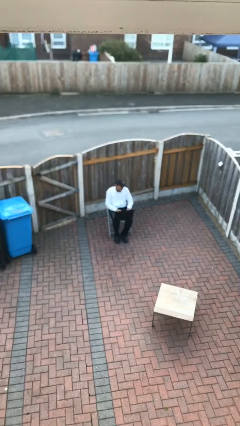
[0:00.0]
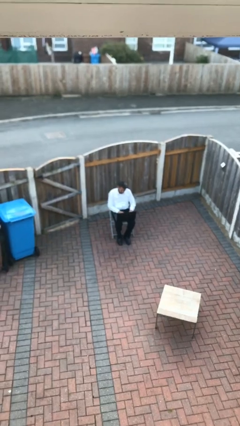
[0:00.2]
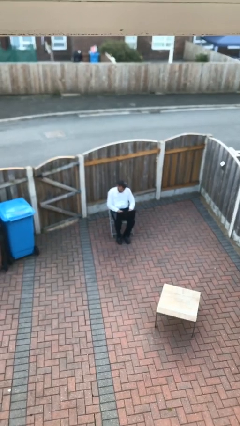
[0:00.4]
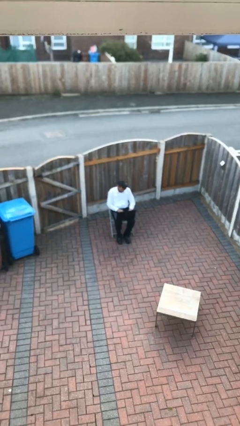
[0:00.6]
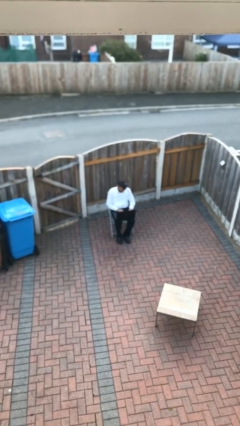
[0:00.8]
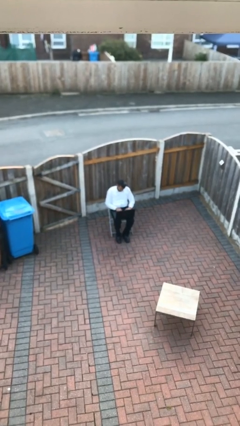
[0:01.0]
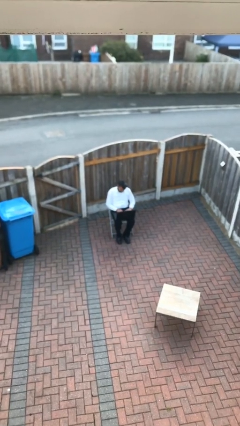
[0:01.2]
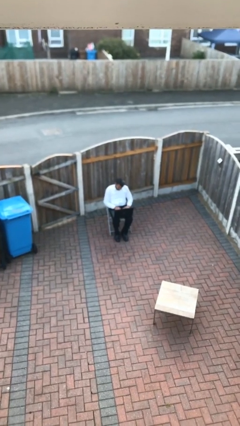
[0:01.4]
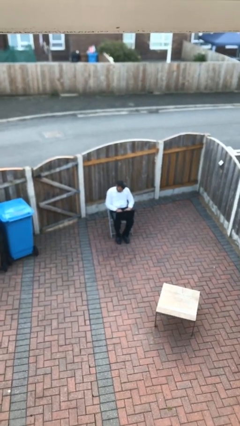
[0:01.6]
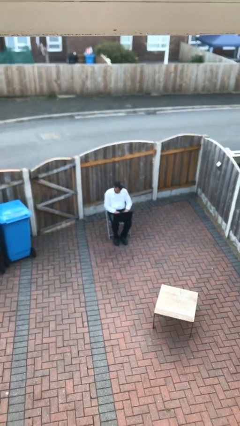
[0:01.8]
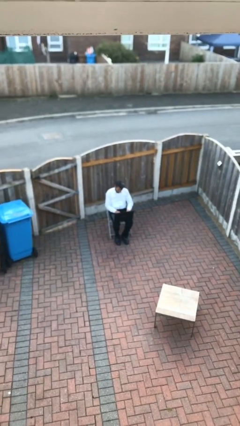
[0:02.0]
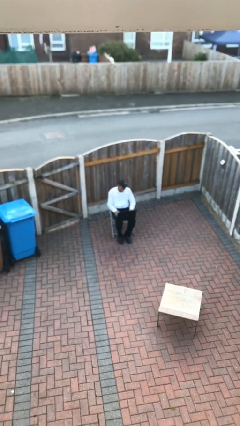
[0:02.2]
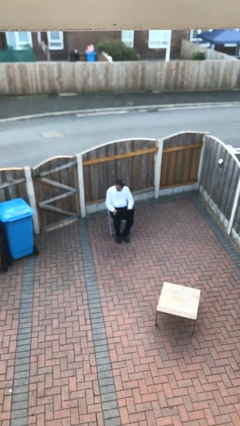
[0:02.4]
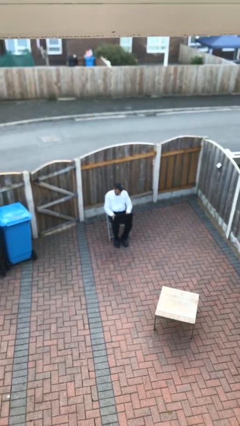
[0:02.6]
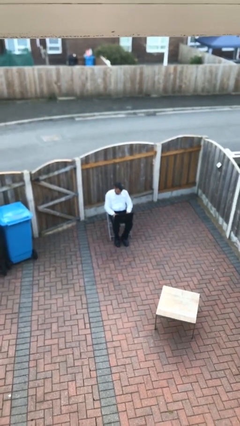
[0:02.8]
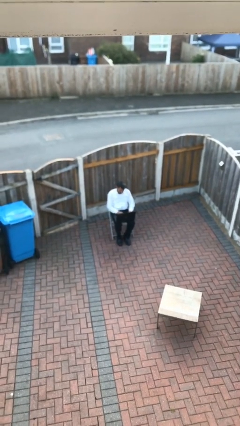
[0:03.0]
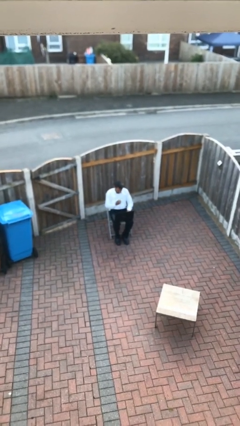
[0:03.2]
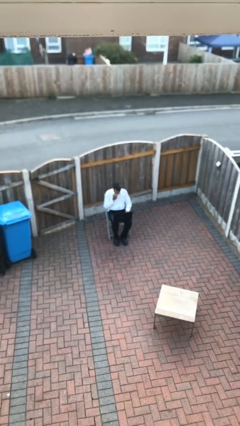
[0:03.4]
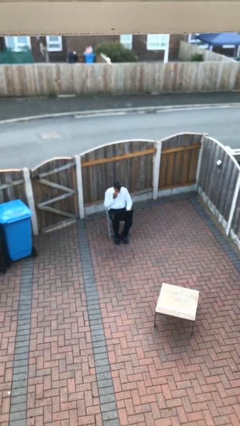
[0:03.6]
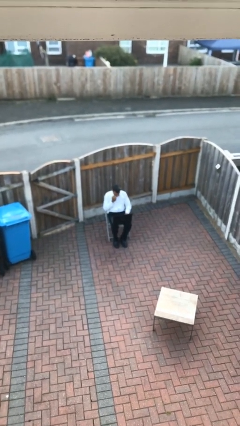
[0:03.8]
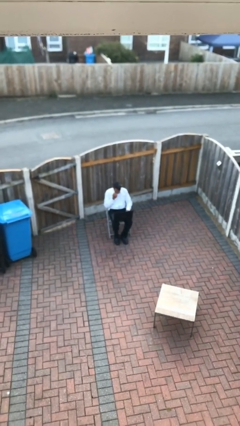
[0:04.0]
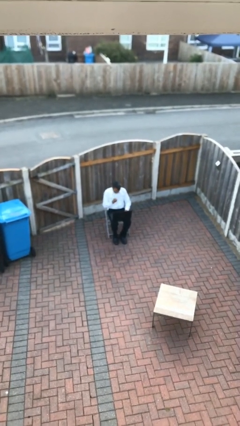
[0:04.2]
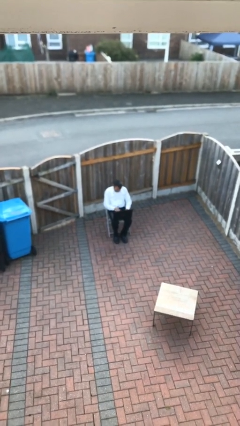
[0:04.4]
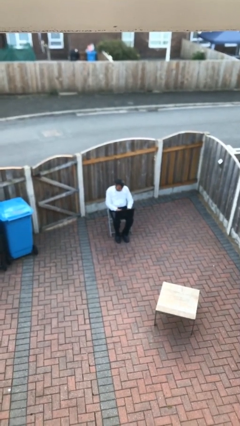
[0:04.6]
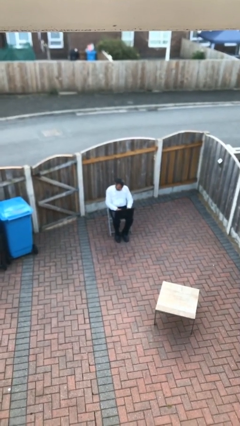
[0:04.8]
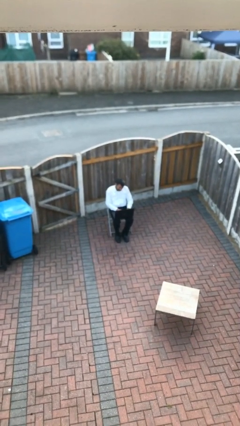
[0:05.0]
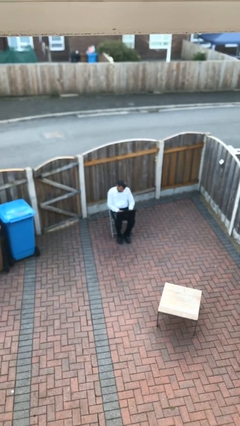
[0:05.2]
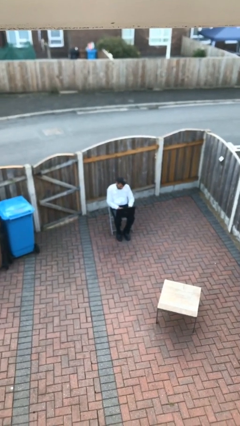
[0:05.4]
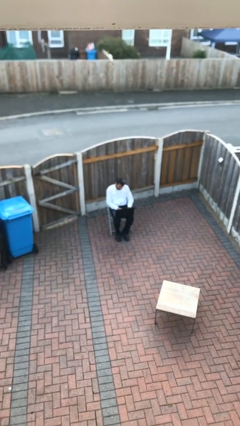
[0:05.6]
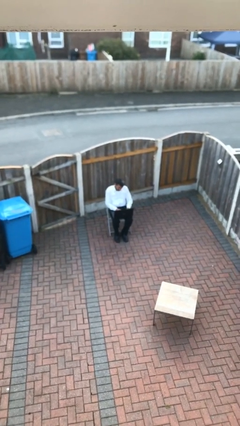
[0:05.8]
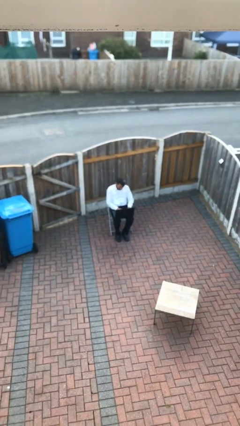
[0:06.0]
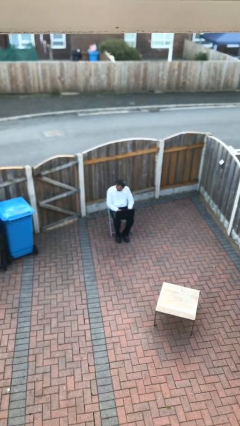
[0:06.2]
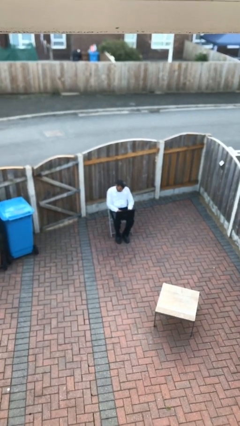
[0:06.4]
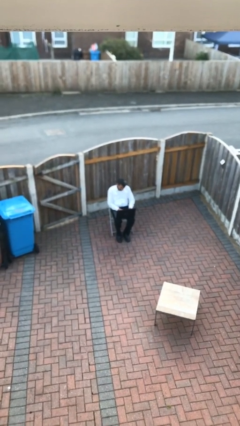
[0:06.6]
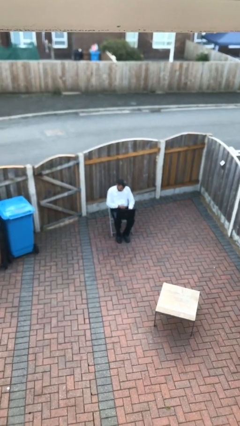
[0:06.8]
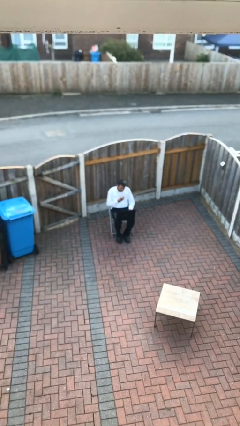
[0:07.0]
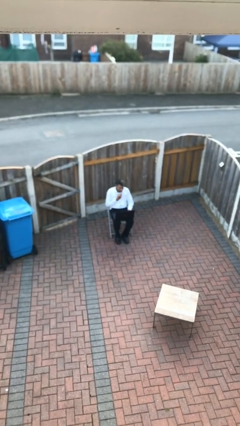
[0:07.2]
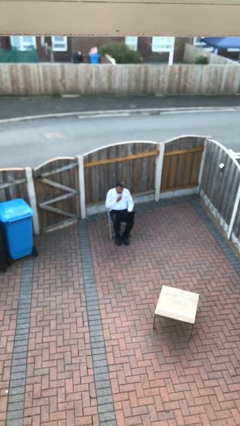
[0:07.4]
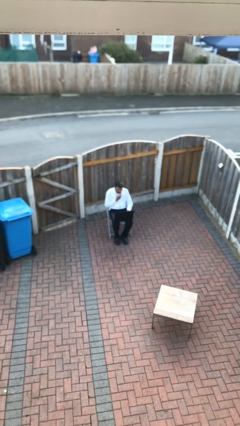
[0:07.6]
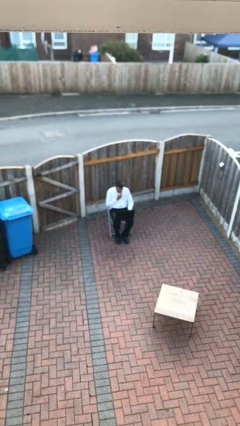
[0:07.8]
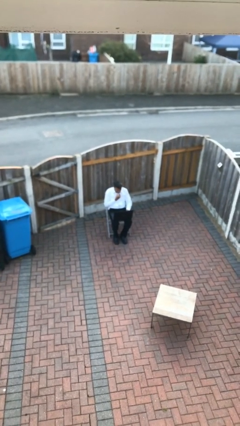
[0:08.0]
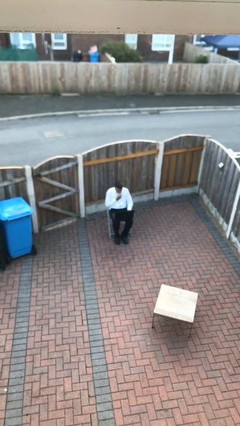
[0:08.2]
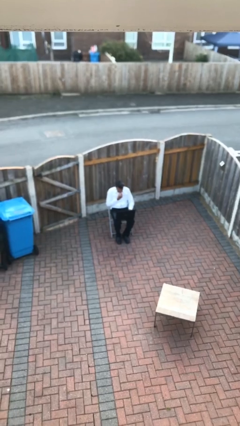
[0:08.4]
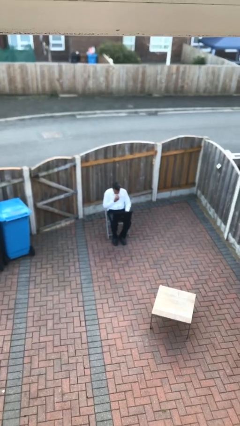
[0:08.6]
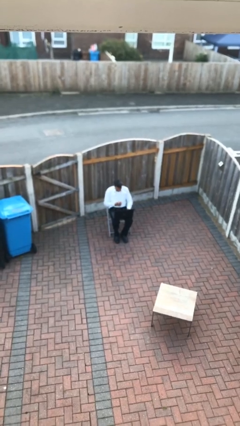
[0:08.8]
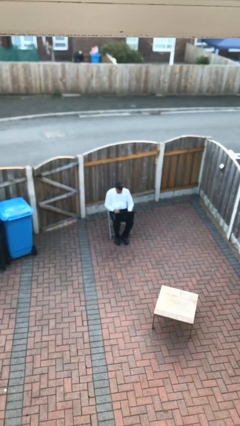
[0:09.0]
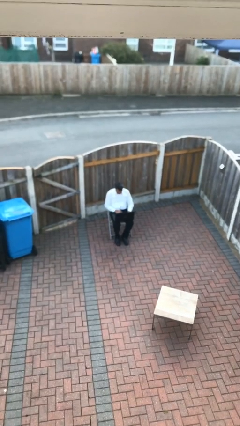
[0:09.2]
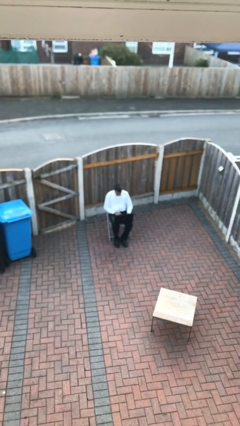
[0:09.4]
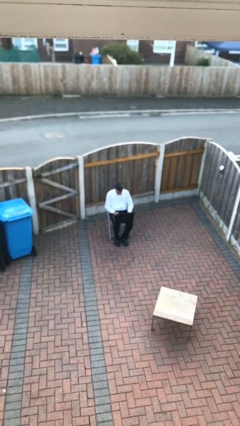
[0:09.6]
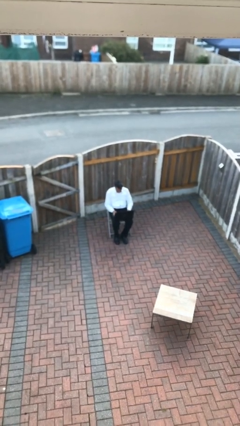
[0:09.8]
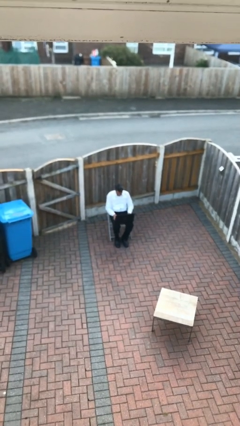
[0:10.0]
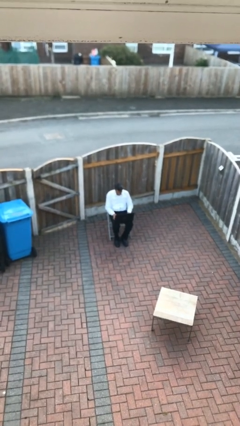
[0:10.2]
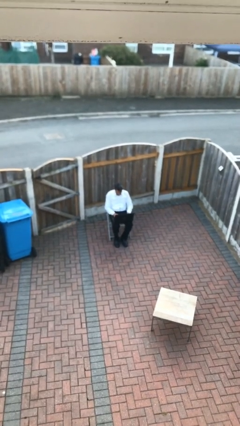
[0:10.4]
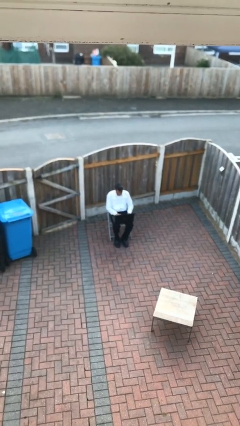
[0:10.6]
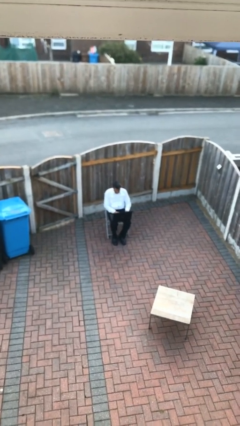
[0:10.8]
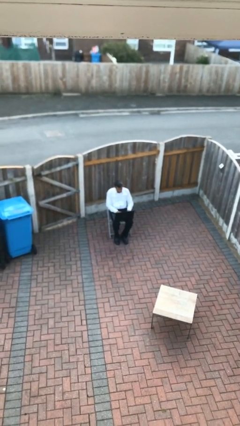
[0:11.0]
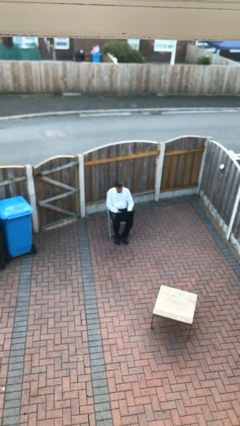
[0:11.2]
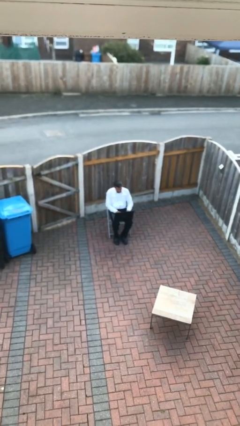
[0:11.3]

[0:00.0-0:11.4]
person interacts with laptop

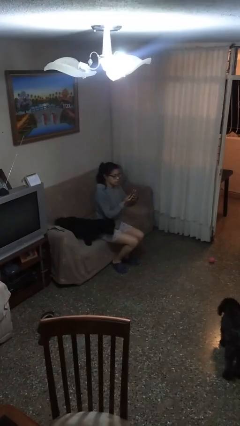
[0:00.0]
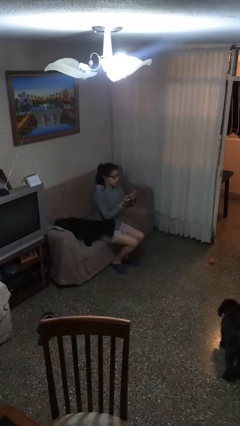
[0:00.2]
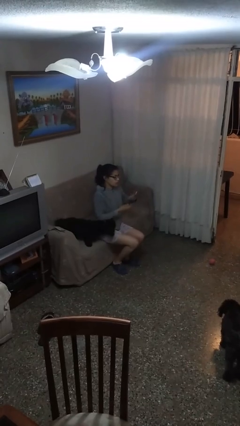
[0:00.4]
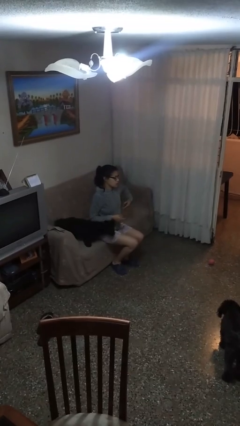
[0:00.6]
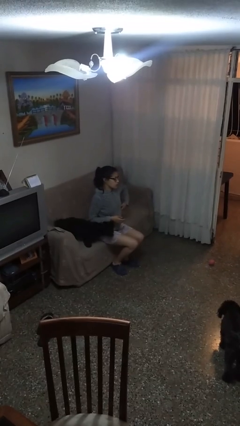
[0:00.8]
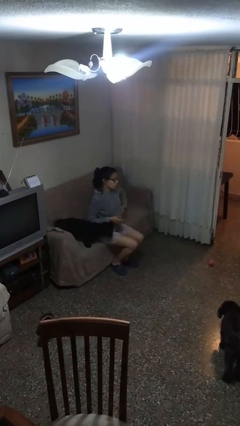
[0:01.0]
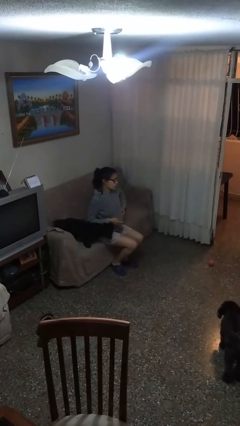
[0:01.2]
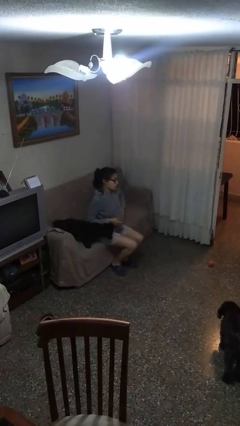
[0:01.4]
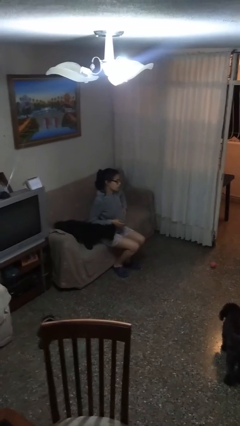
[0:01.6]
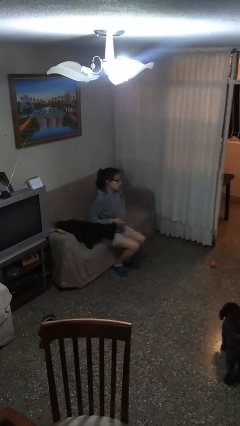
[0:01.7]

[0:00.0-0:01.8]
person puts phone into pocket

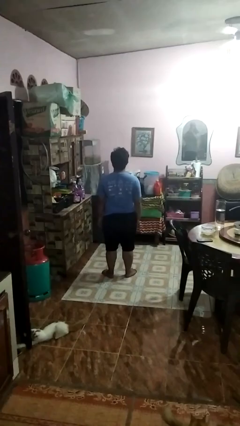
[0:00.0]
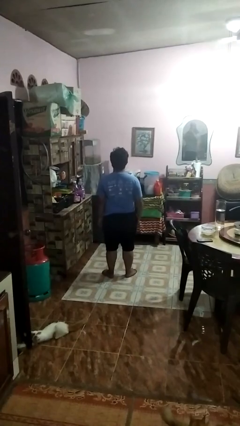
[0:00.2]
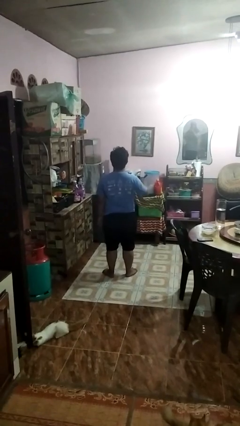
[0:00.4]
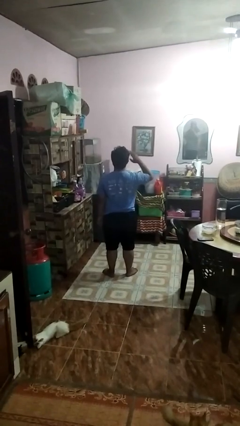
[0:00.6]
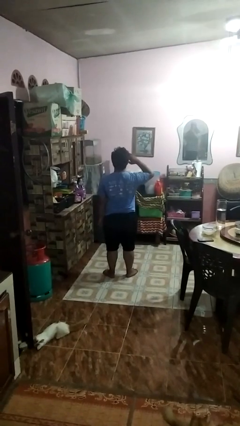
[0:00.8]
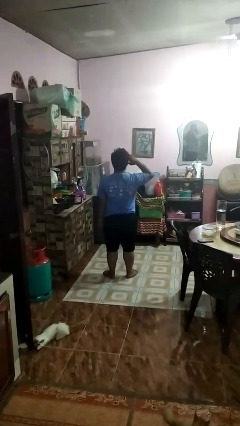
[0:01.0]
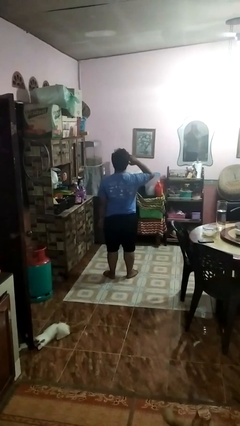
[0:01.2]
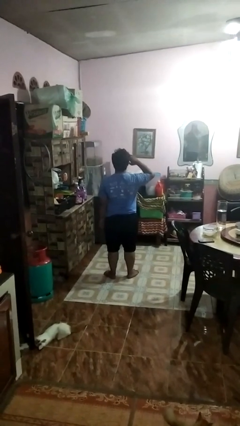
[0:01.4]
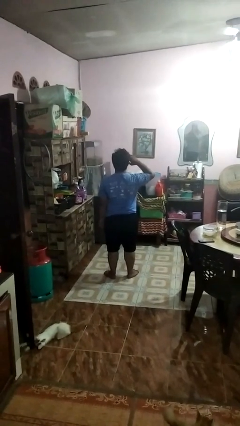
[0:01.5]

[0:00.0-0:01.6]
person salutes

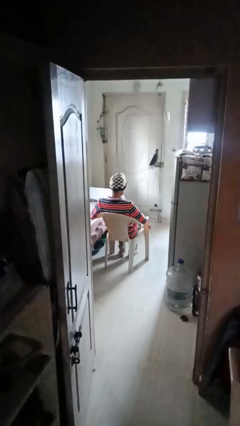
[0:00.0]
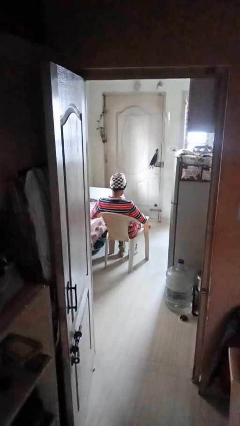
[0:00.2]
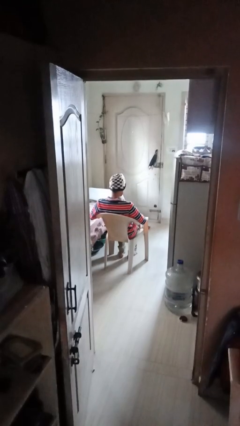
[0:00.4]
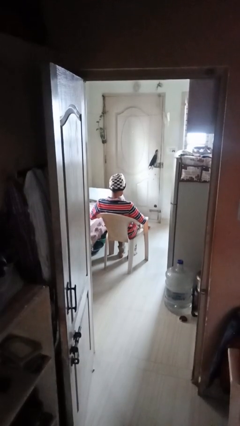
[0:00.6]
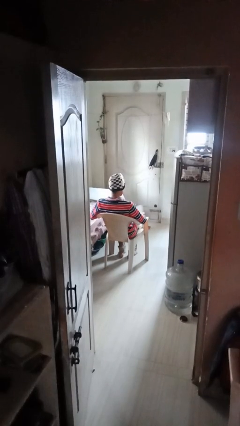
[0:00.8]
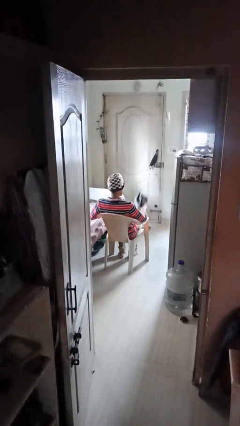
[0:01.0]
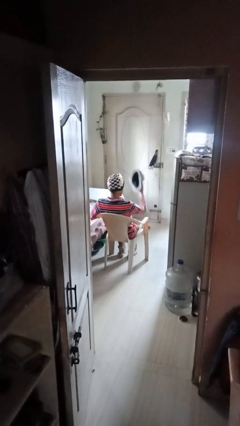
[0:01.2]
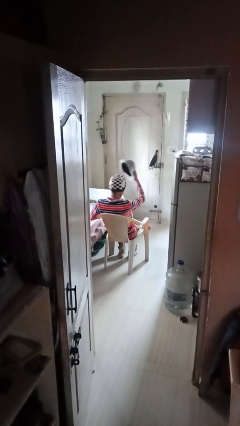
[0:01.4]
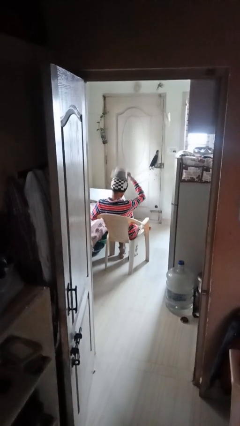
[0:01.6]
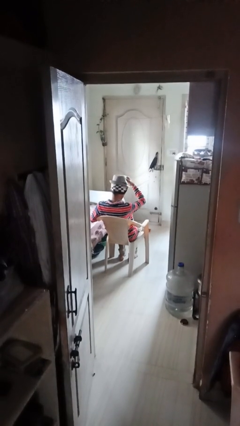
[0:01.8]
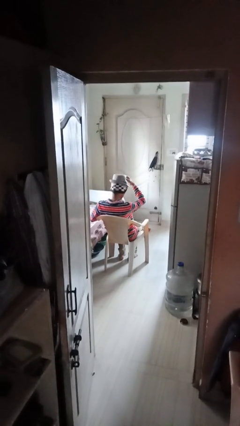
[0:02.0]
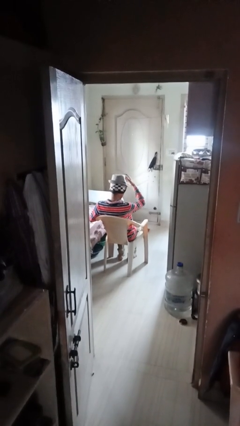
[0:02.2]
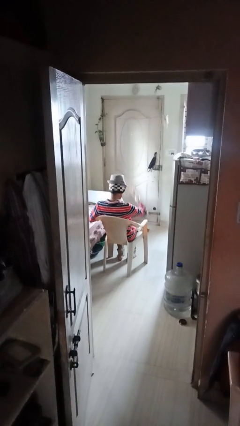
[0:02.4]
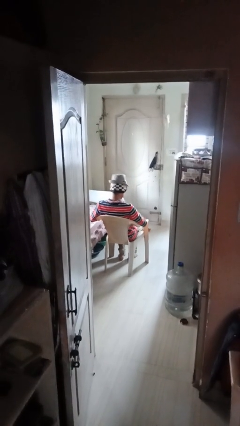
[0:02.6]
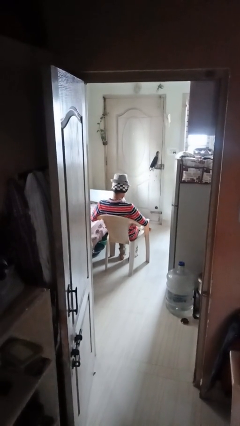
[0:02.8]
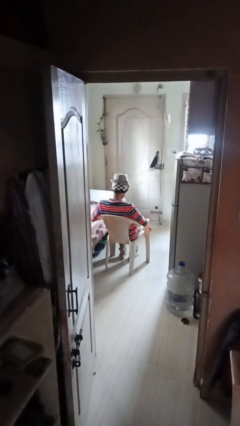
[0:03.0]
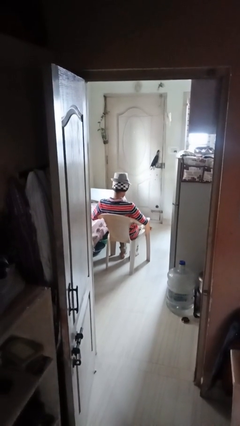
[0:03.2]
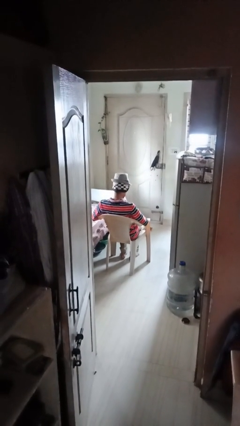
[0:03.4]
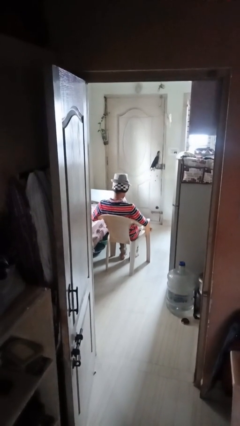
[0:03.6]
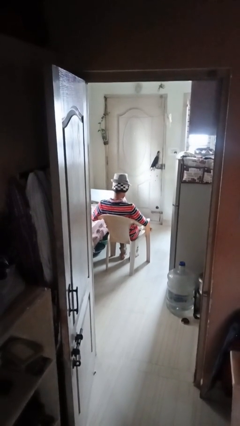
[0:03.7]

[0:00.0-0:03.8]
person puts on hat
